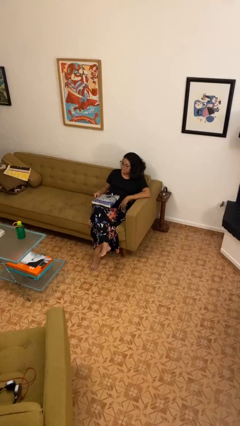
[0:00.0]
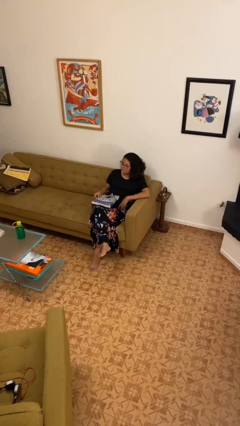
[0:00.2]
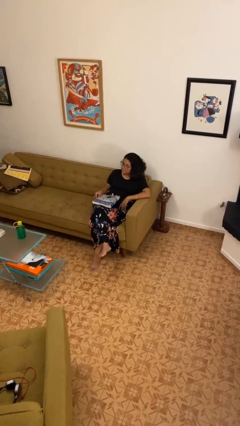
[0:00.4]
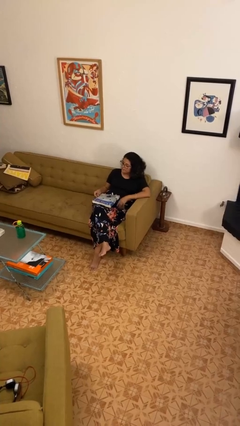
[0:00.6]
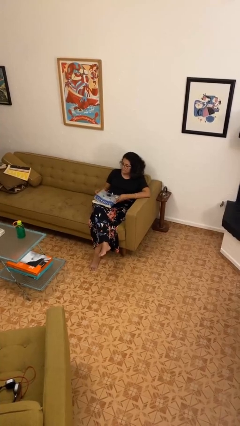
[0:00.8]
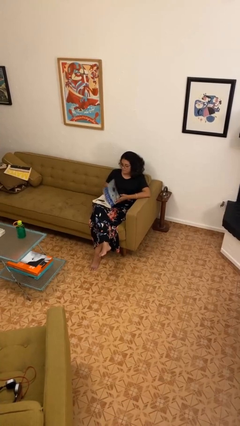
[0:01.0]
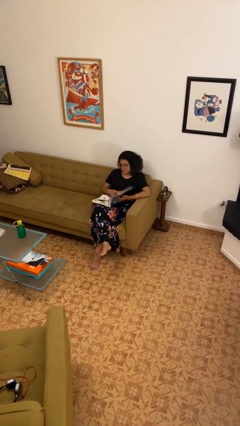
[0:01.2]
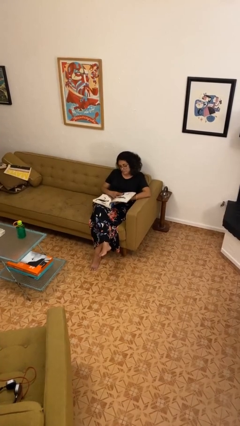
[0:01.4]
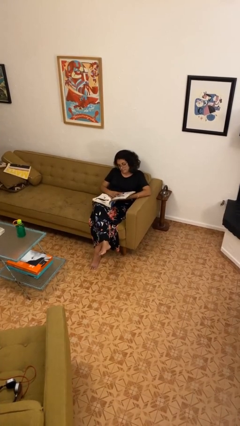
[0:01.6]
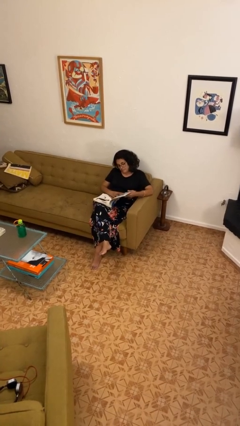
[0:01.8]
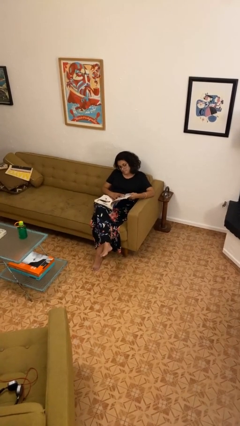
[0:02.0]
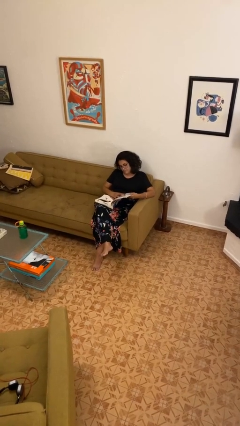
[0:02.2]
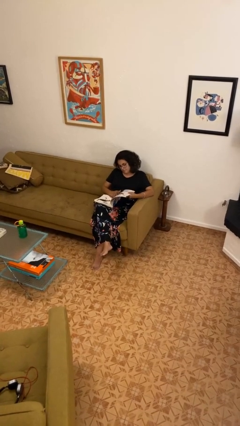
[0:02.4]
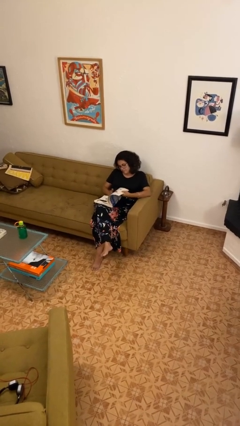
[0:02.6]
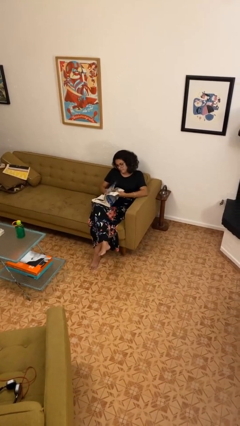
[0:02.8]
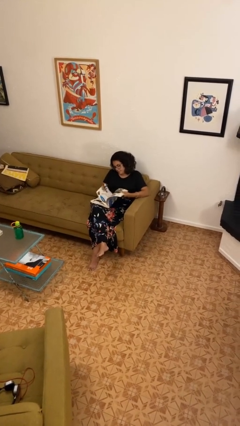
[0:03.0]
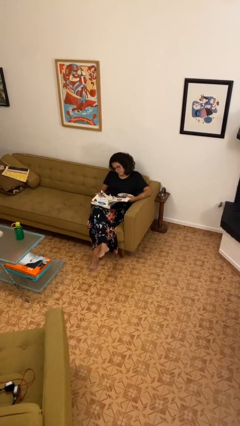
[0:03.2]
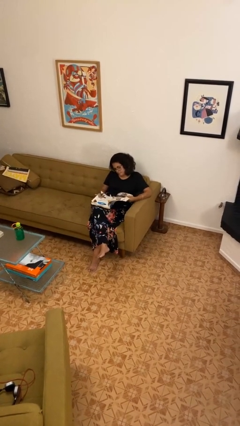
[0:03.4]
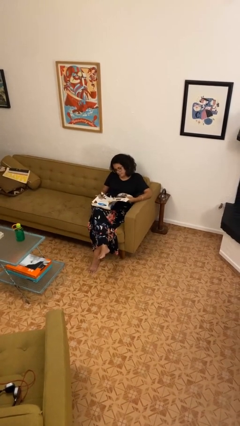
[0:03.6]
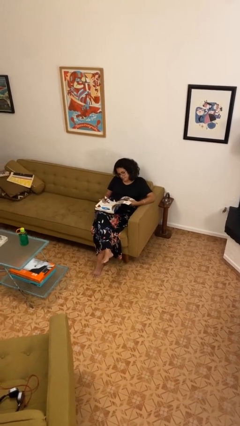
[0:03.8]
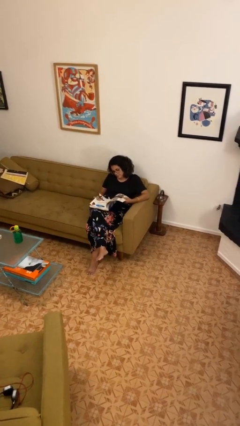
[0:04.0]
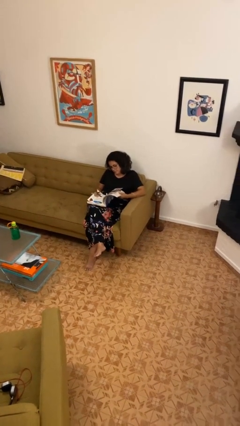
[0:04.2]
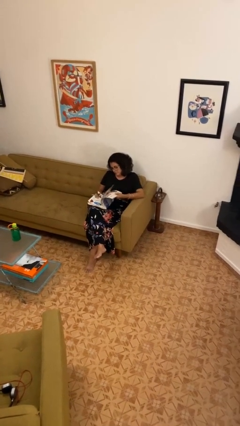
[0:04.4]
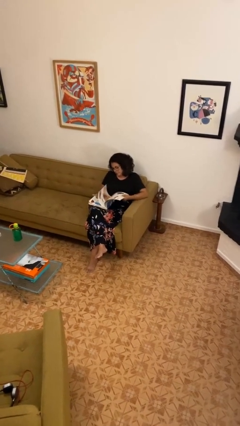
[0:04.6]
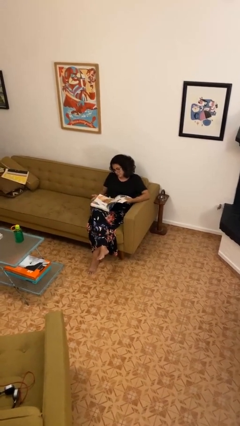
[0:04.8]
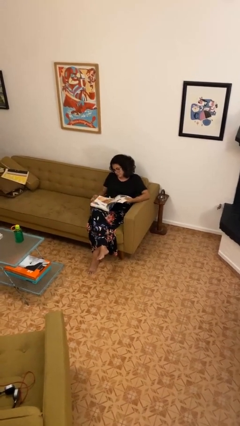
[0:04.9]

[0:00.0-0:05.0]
person reads book

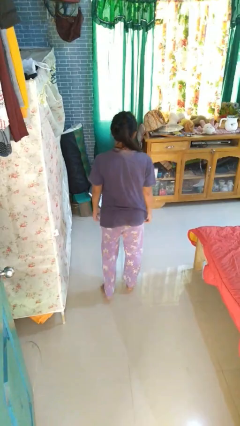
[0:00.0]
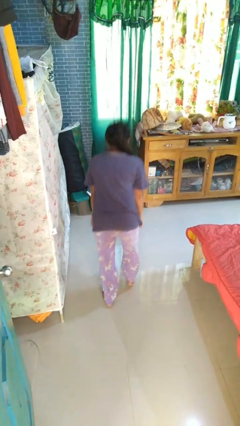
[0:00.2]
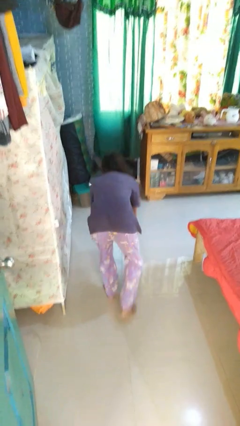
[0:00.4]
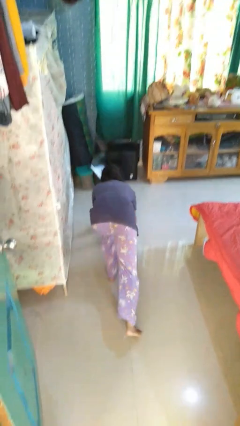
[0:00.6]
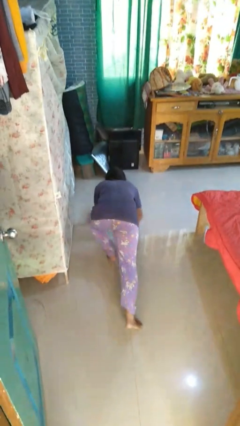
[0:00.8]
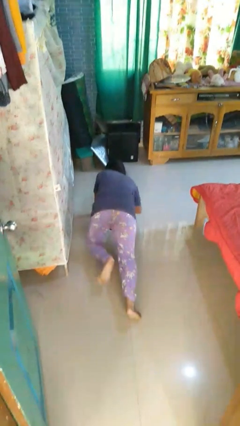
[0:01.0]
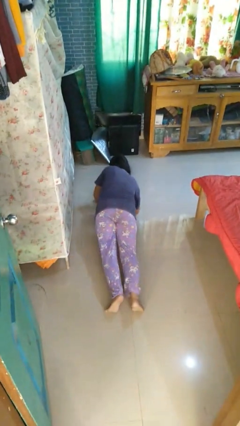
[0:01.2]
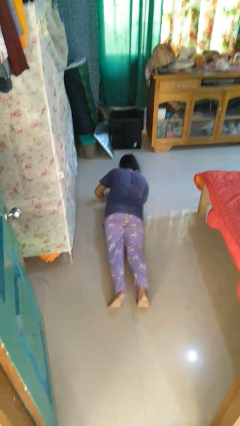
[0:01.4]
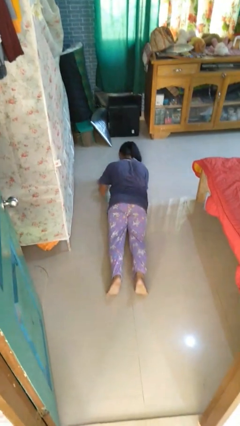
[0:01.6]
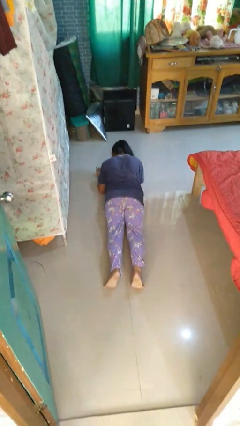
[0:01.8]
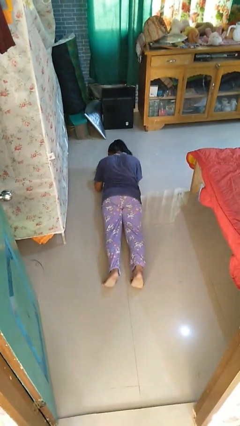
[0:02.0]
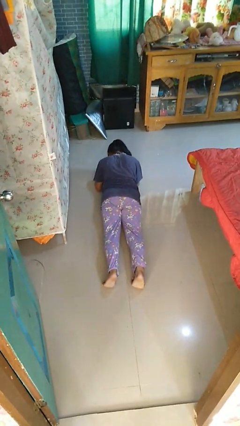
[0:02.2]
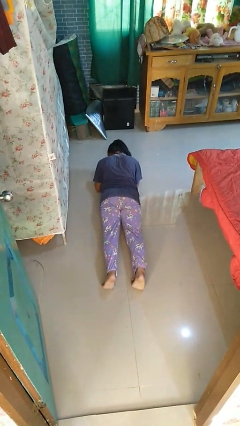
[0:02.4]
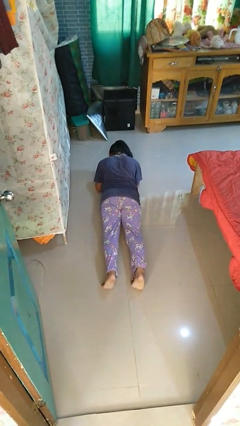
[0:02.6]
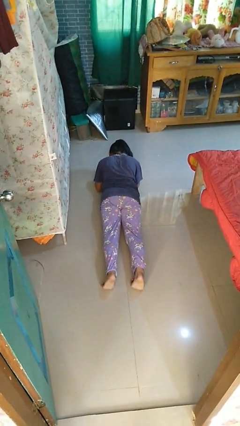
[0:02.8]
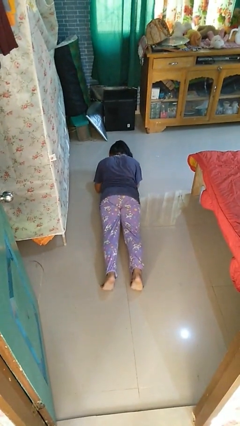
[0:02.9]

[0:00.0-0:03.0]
person exercises with plank

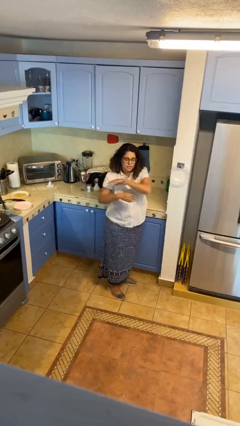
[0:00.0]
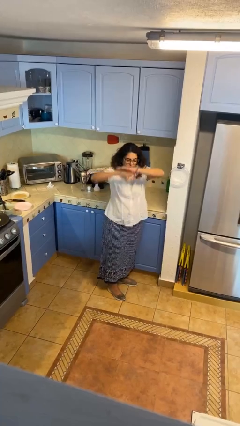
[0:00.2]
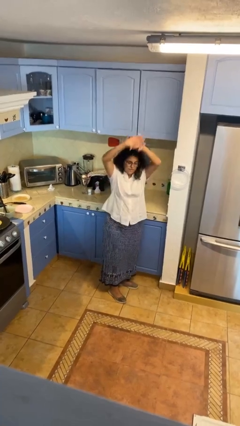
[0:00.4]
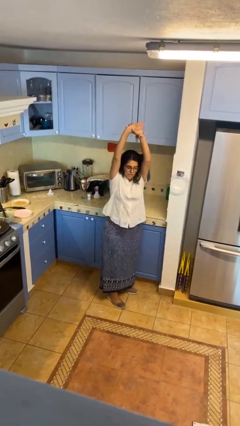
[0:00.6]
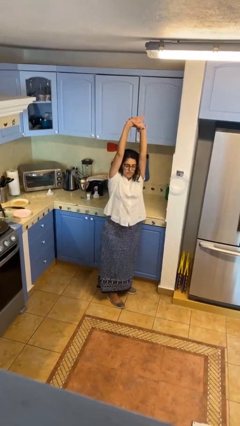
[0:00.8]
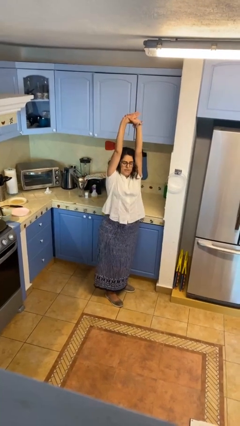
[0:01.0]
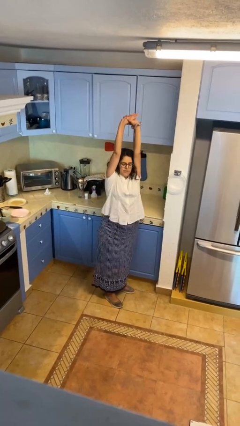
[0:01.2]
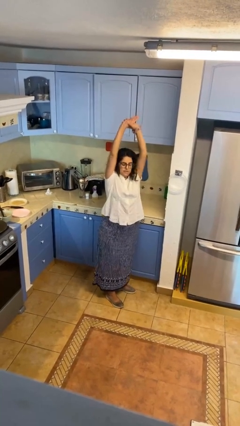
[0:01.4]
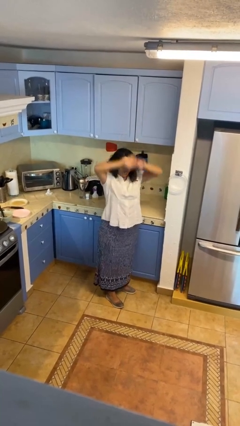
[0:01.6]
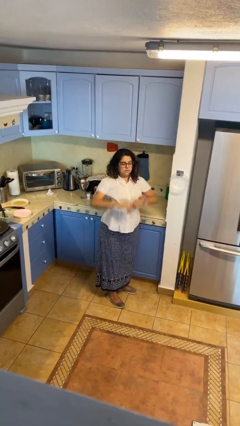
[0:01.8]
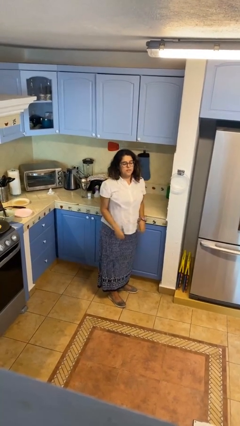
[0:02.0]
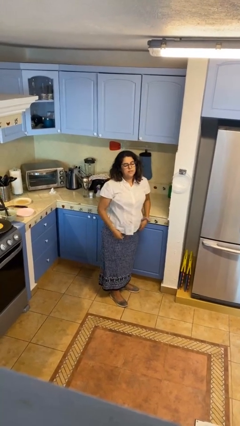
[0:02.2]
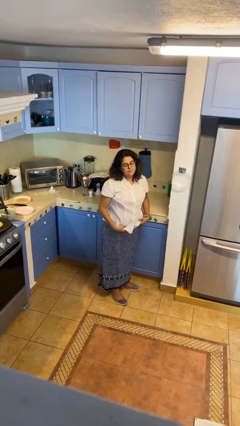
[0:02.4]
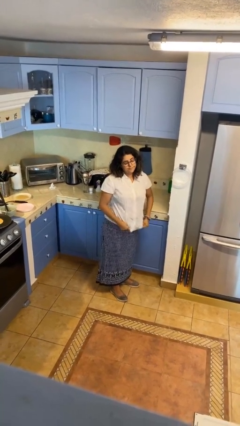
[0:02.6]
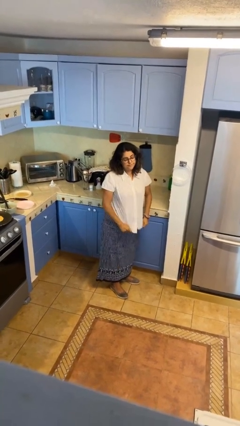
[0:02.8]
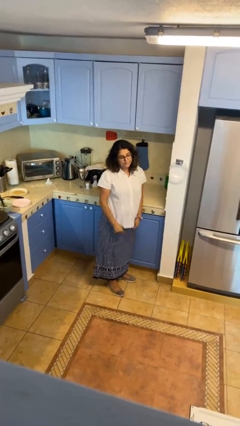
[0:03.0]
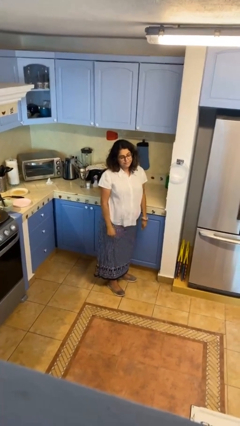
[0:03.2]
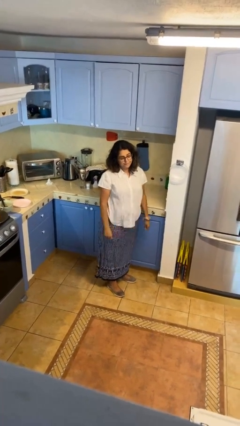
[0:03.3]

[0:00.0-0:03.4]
person stretches arms over head

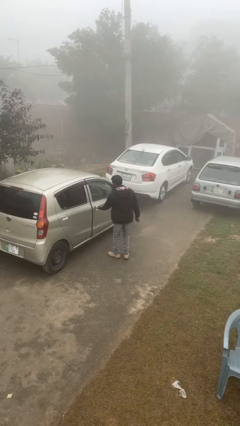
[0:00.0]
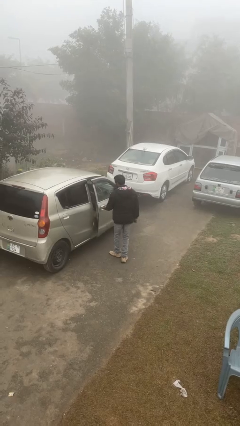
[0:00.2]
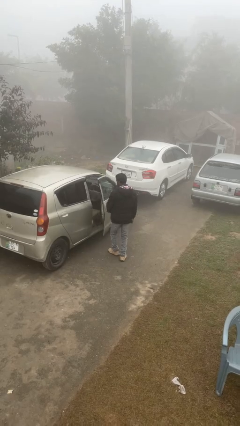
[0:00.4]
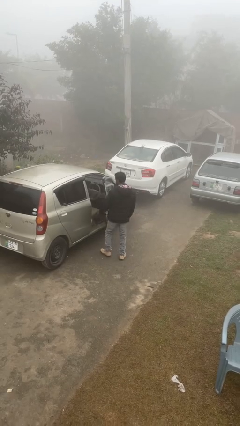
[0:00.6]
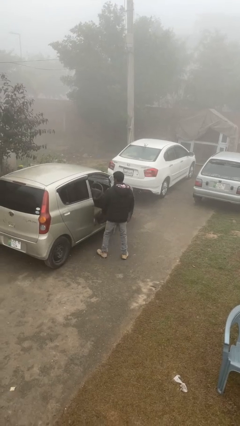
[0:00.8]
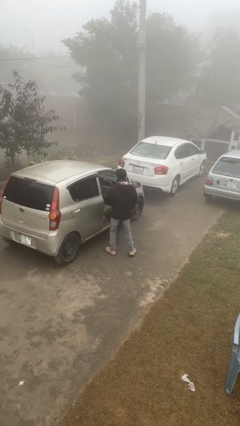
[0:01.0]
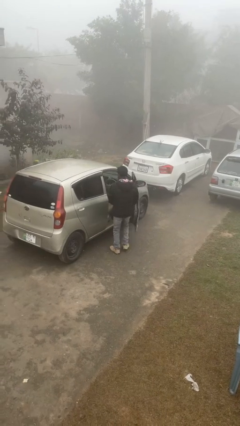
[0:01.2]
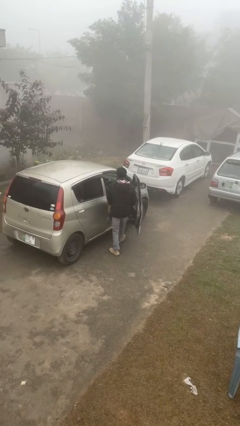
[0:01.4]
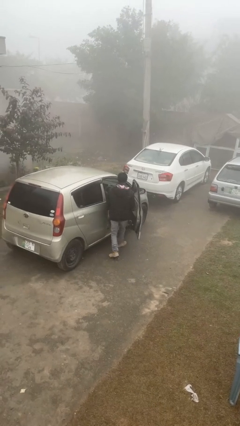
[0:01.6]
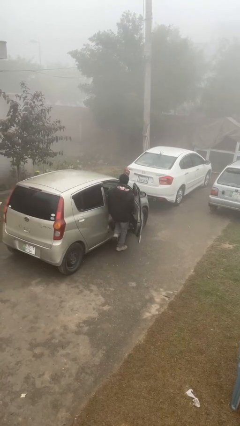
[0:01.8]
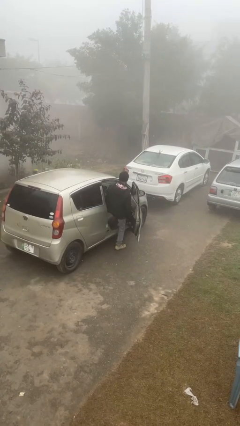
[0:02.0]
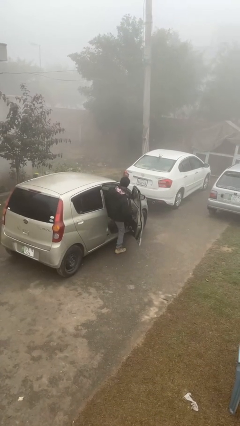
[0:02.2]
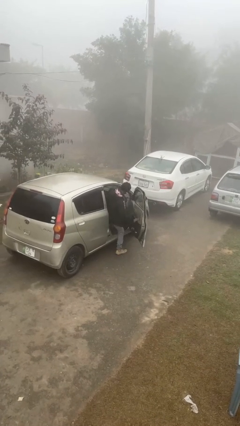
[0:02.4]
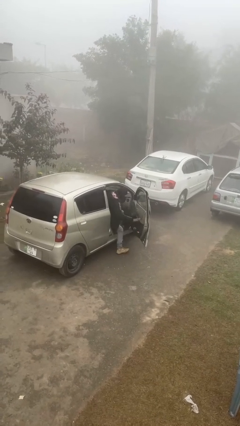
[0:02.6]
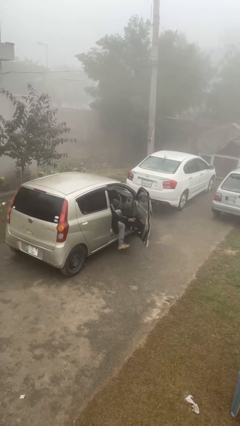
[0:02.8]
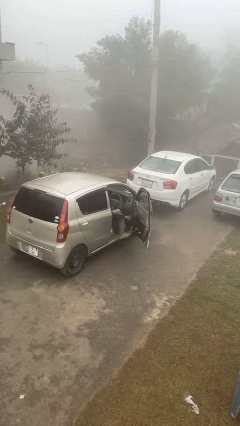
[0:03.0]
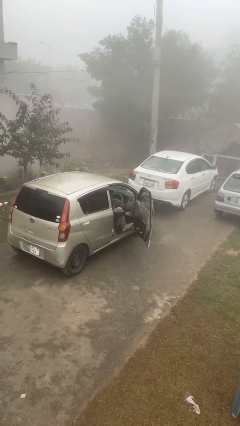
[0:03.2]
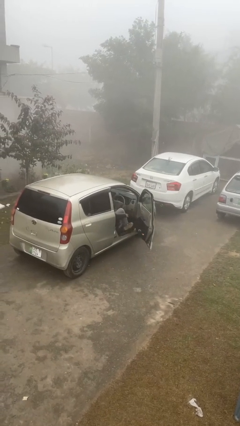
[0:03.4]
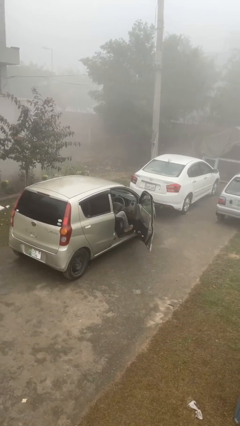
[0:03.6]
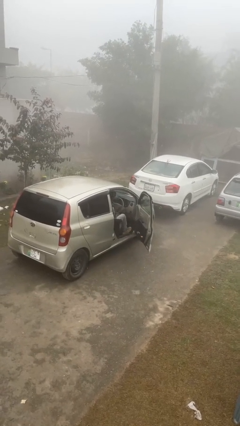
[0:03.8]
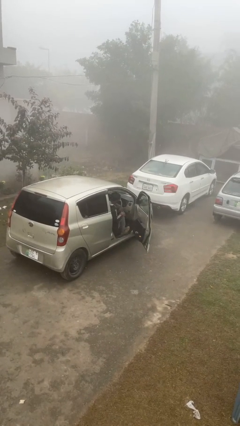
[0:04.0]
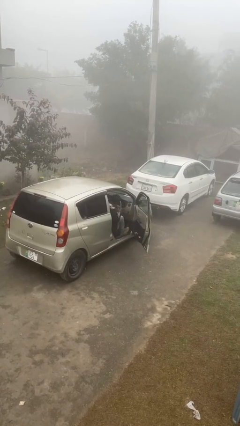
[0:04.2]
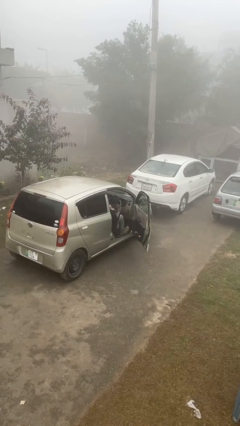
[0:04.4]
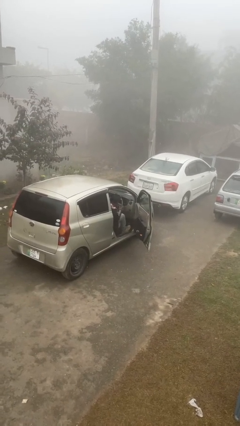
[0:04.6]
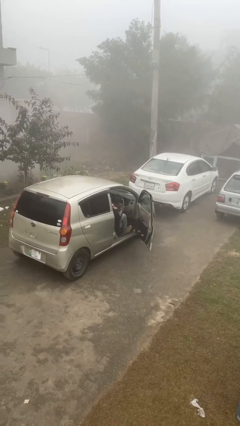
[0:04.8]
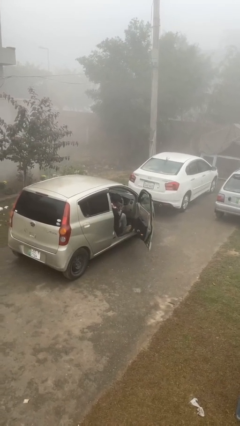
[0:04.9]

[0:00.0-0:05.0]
person enters car

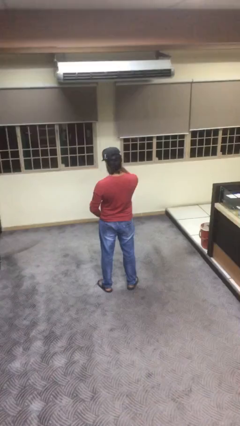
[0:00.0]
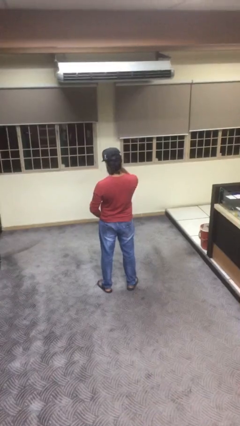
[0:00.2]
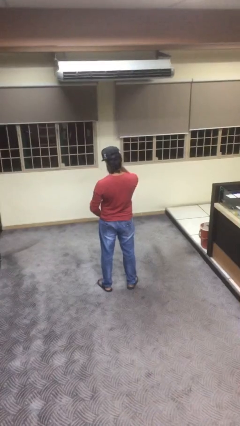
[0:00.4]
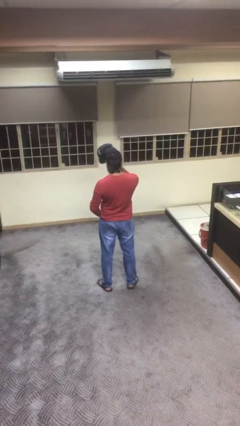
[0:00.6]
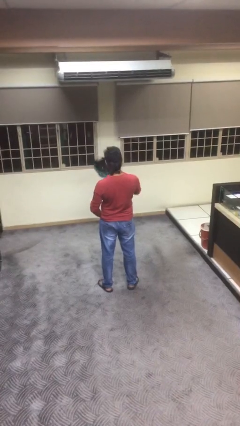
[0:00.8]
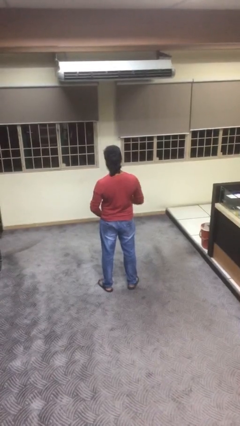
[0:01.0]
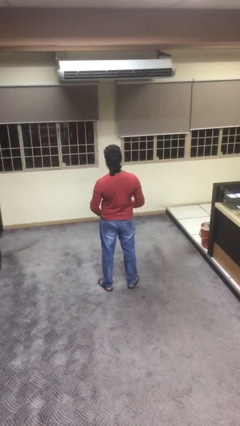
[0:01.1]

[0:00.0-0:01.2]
person takes off hat
